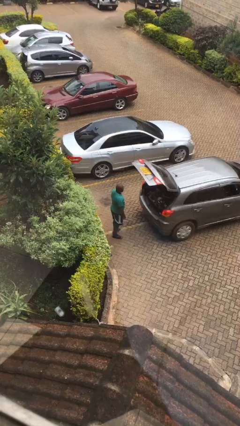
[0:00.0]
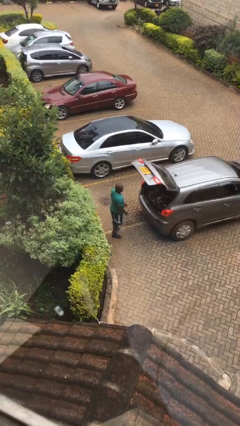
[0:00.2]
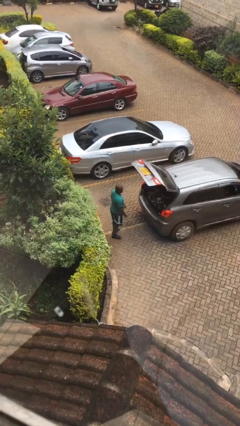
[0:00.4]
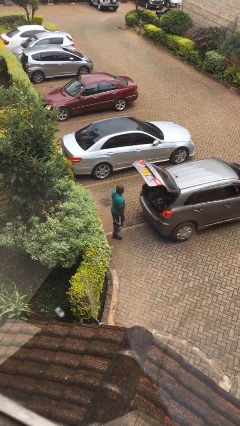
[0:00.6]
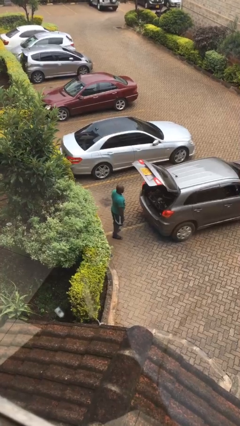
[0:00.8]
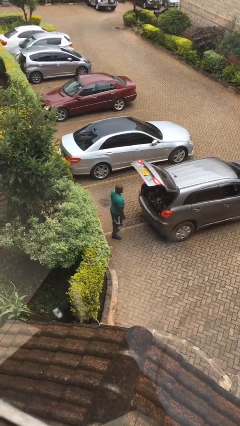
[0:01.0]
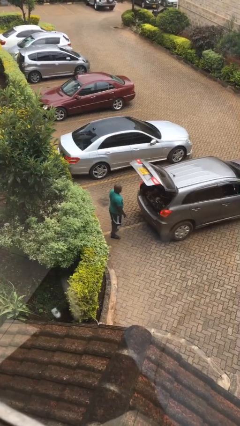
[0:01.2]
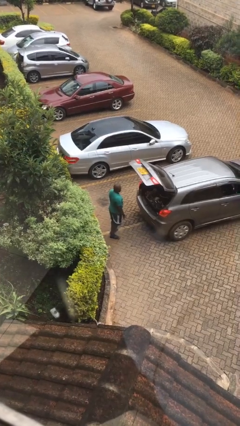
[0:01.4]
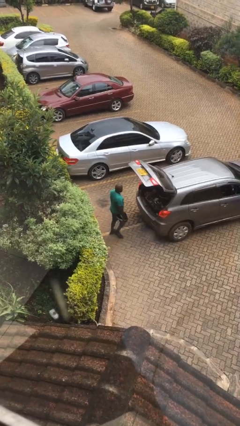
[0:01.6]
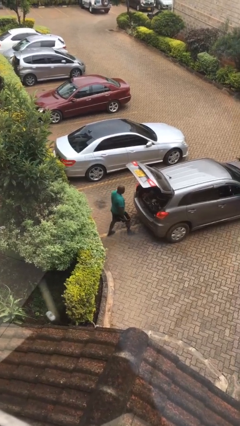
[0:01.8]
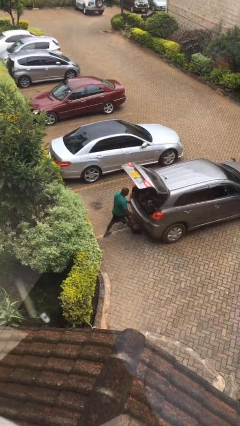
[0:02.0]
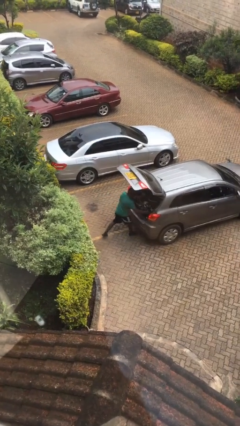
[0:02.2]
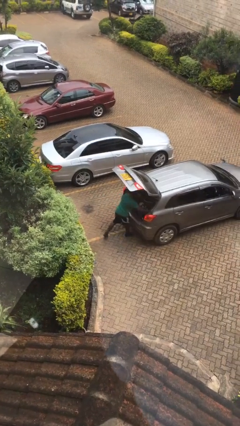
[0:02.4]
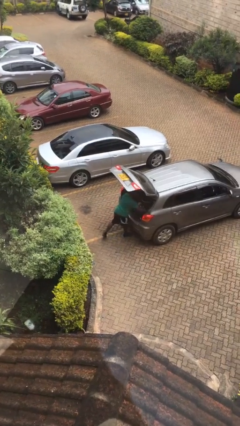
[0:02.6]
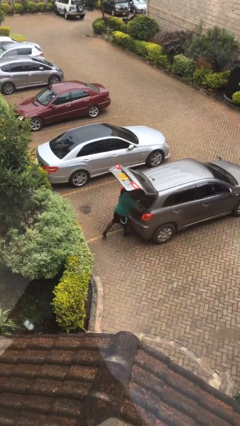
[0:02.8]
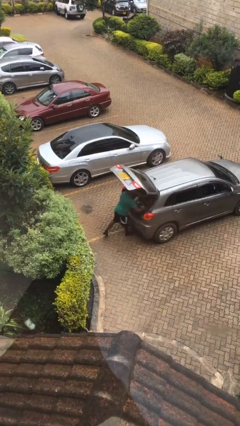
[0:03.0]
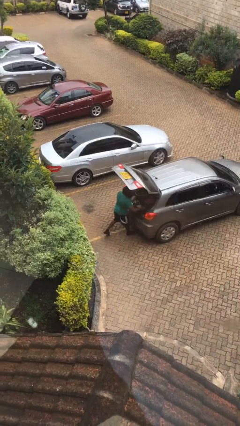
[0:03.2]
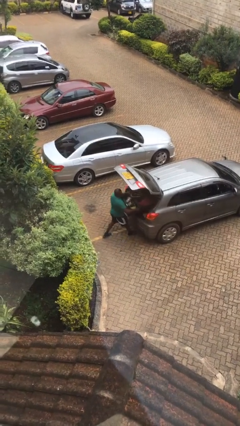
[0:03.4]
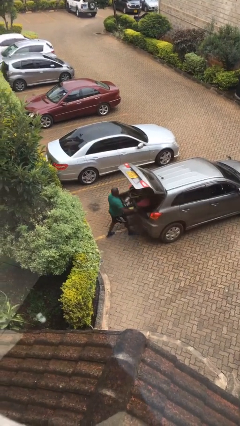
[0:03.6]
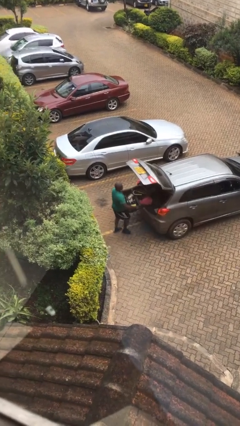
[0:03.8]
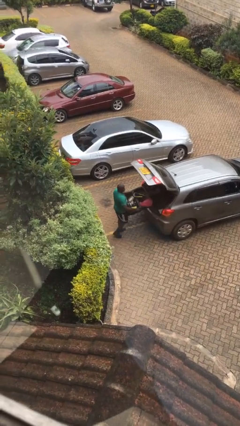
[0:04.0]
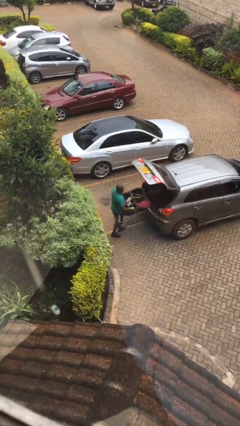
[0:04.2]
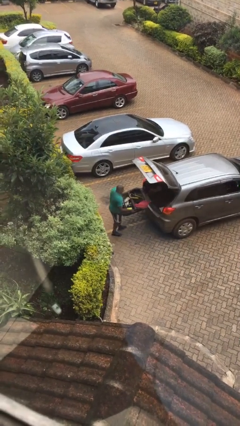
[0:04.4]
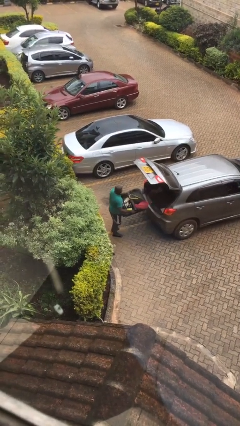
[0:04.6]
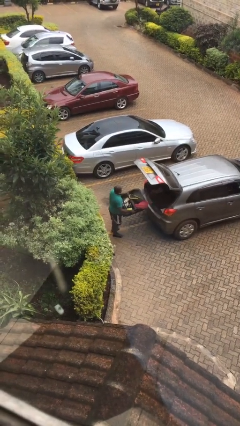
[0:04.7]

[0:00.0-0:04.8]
person unloads car

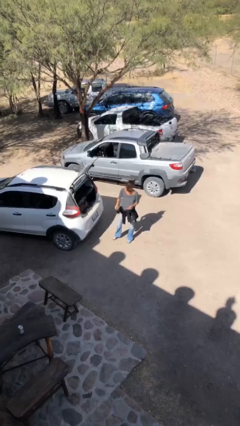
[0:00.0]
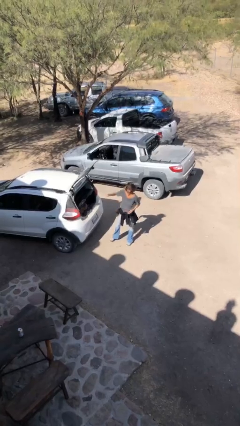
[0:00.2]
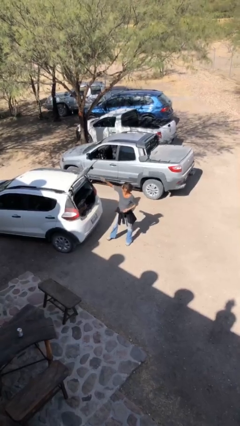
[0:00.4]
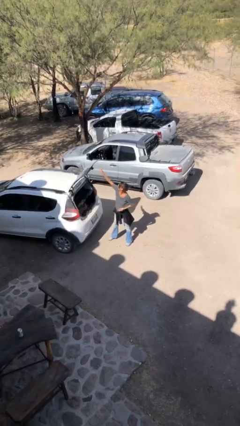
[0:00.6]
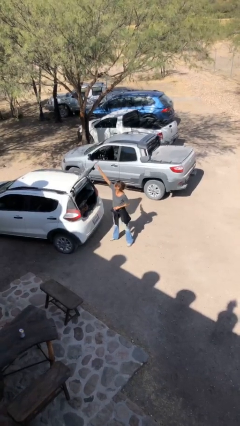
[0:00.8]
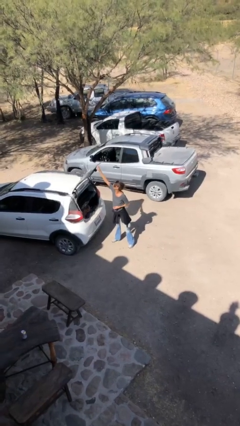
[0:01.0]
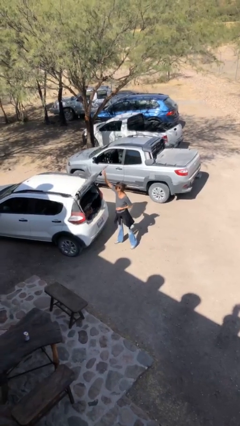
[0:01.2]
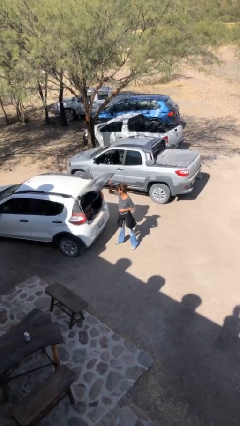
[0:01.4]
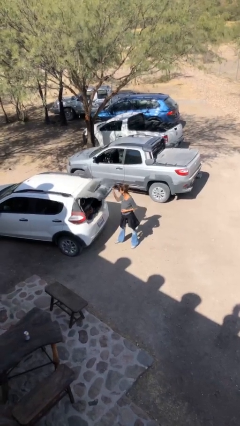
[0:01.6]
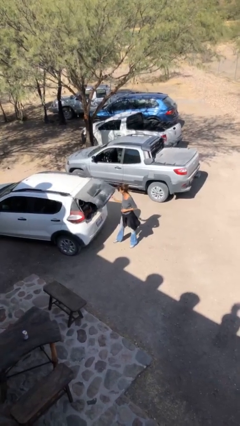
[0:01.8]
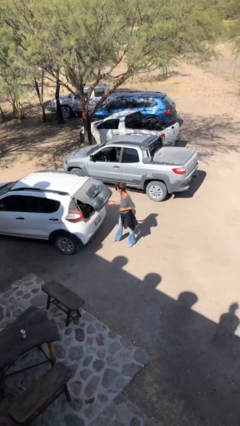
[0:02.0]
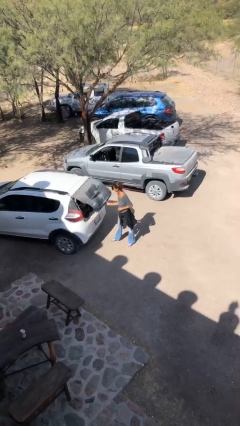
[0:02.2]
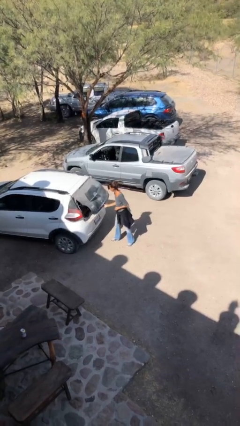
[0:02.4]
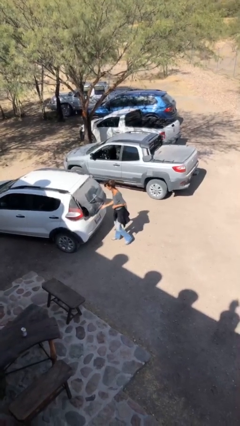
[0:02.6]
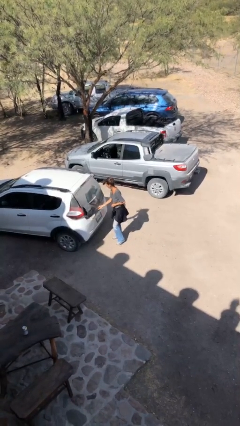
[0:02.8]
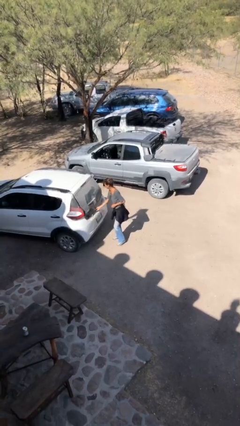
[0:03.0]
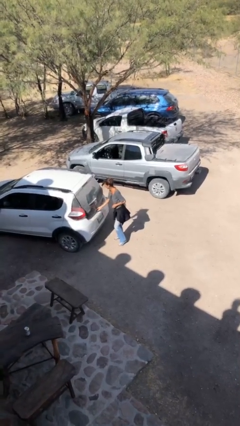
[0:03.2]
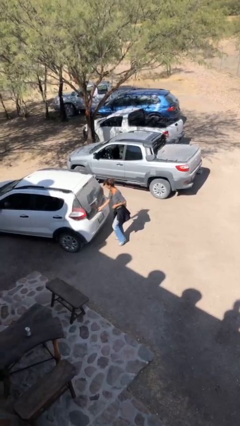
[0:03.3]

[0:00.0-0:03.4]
person closes car trunk

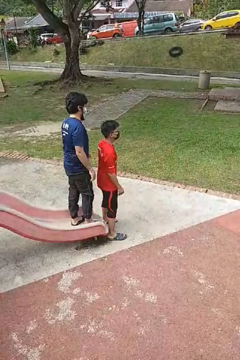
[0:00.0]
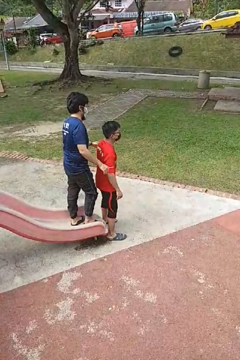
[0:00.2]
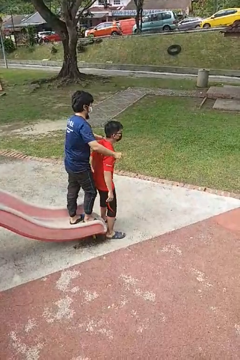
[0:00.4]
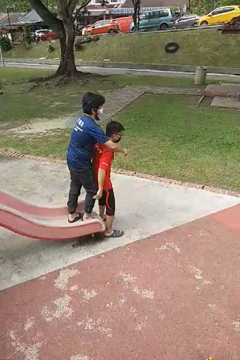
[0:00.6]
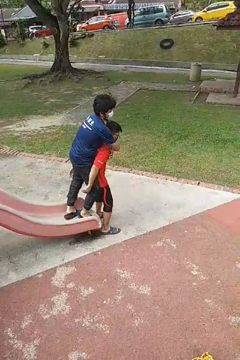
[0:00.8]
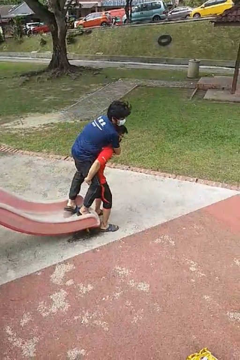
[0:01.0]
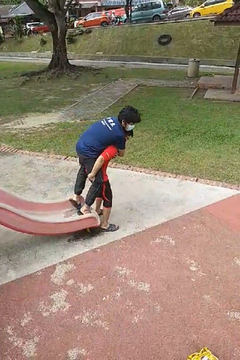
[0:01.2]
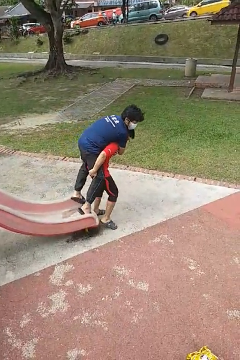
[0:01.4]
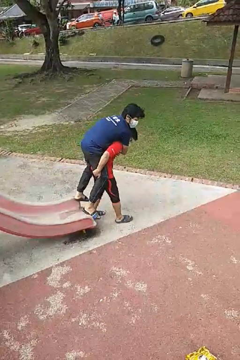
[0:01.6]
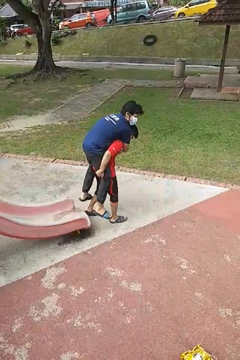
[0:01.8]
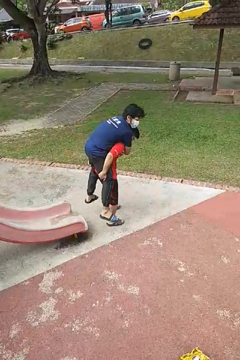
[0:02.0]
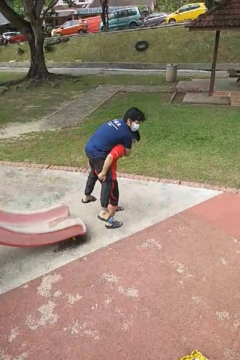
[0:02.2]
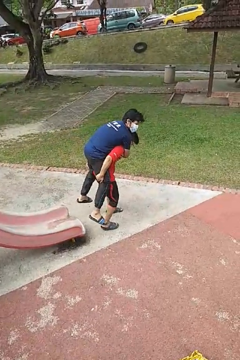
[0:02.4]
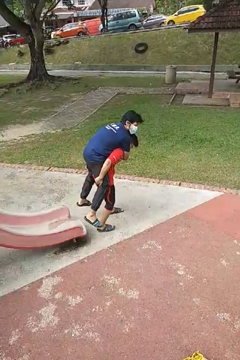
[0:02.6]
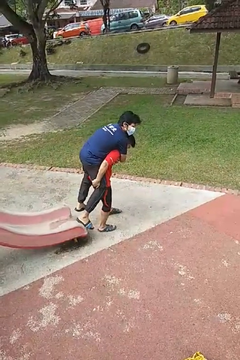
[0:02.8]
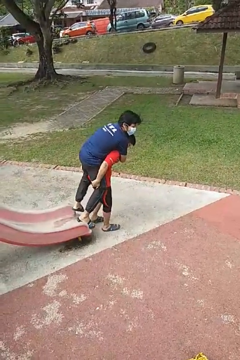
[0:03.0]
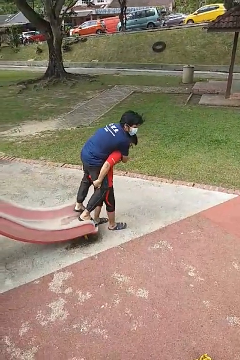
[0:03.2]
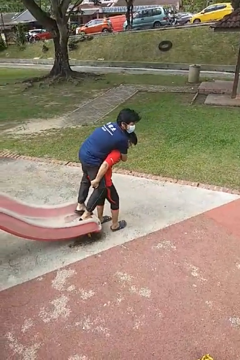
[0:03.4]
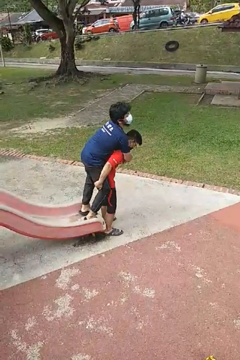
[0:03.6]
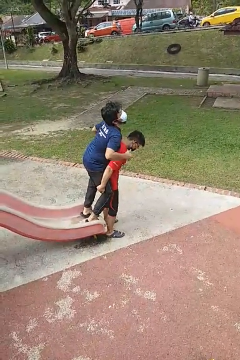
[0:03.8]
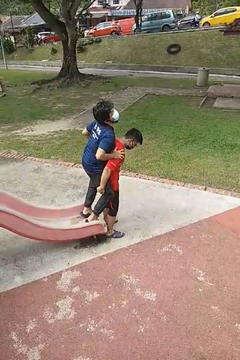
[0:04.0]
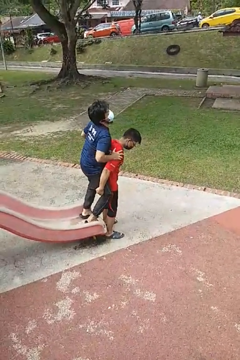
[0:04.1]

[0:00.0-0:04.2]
person carries person on back

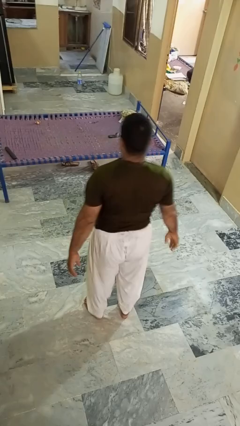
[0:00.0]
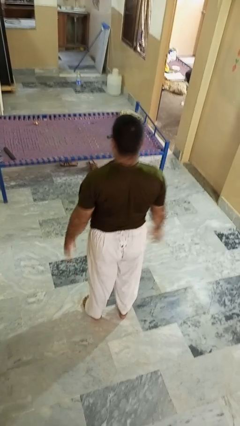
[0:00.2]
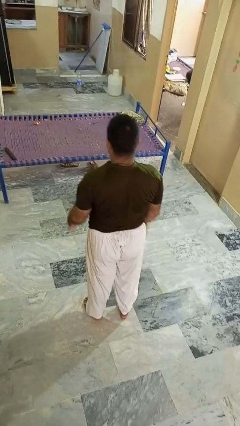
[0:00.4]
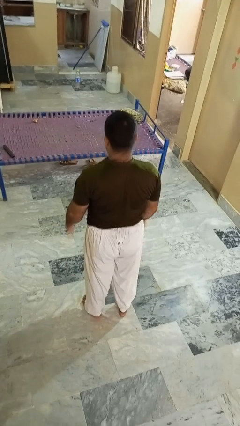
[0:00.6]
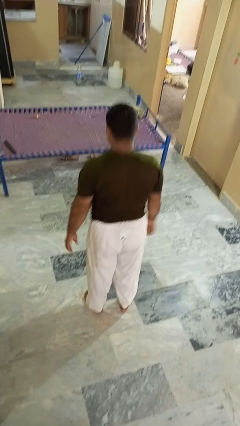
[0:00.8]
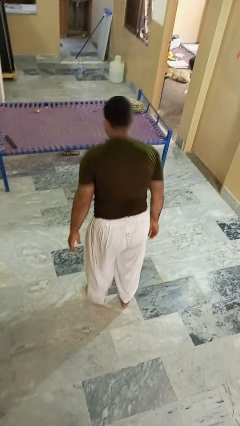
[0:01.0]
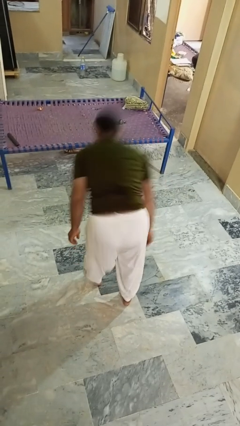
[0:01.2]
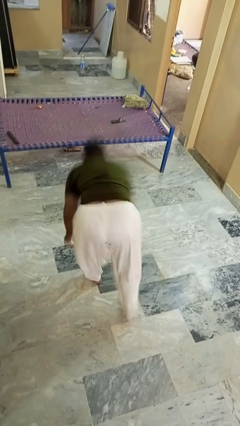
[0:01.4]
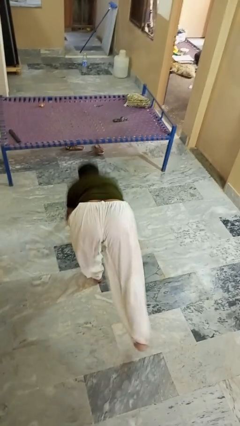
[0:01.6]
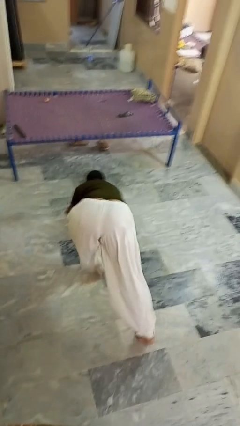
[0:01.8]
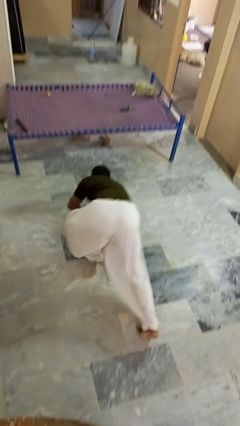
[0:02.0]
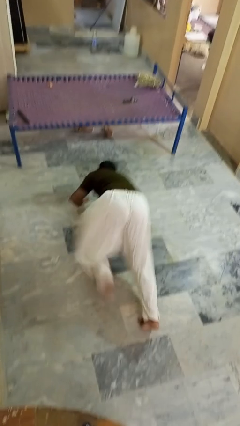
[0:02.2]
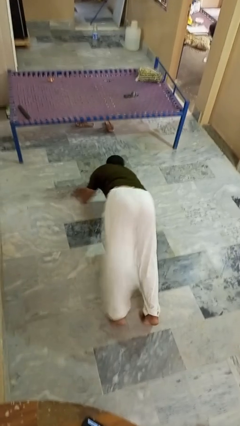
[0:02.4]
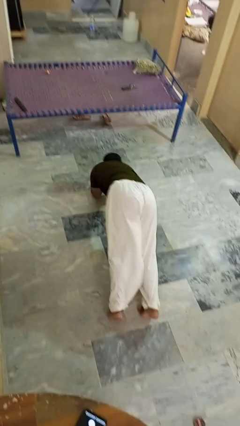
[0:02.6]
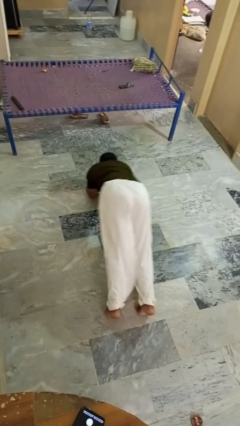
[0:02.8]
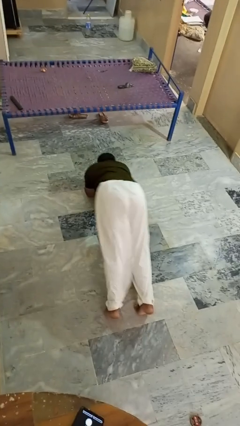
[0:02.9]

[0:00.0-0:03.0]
person exercises with plank

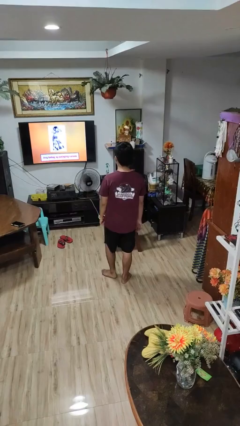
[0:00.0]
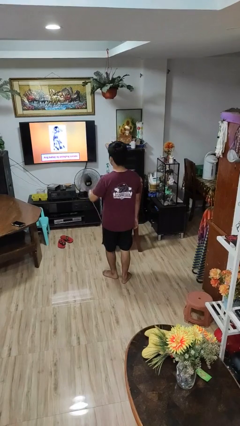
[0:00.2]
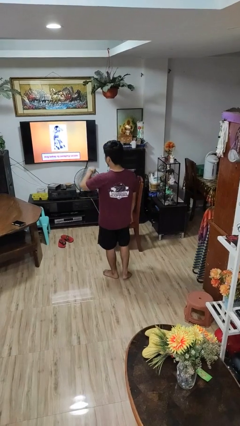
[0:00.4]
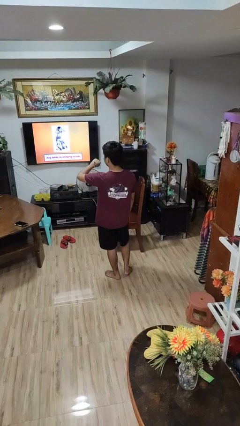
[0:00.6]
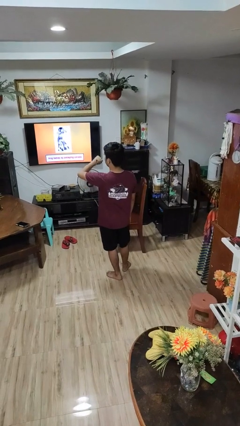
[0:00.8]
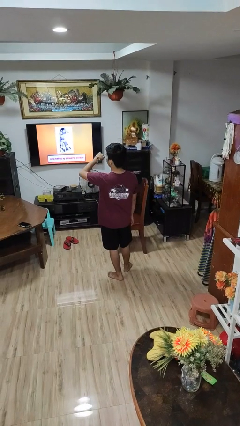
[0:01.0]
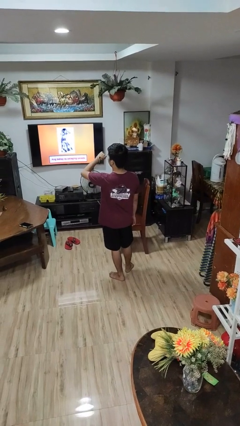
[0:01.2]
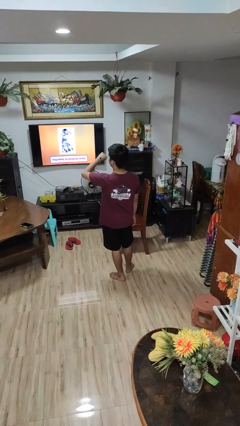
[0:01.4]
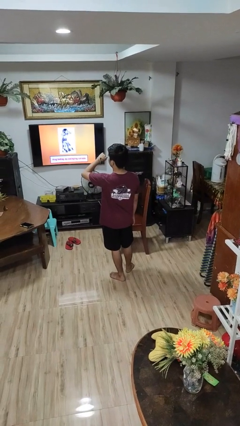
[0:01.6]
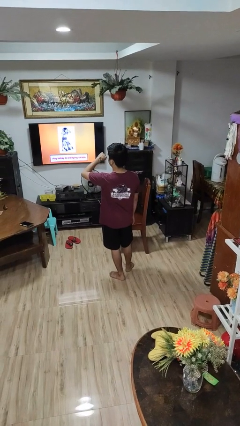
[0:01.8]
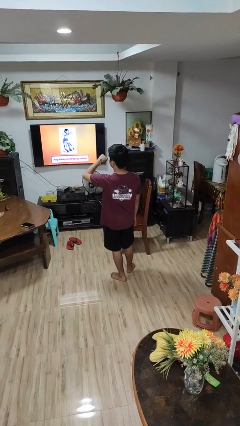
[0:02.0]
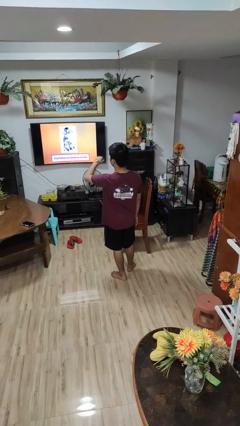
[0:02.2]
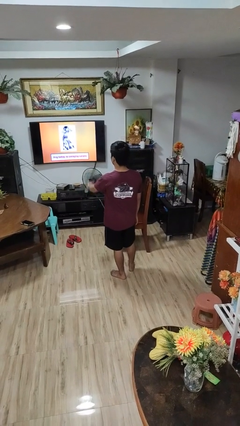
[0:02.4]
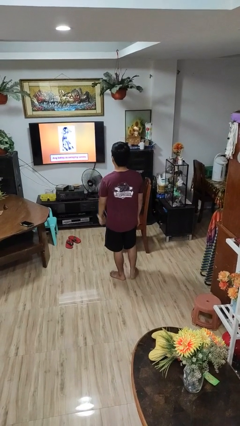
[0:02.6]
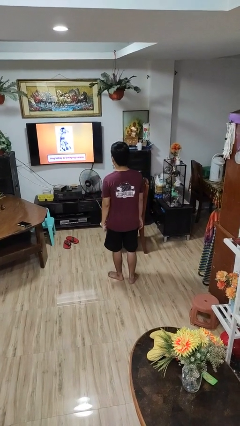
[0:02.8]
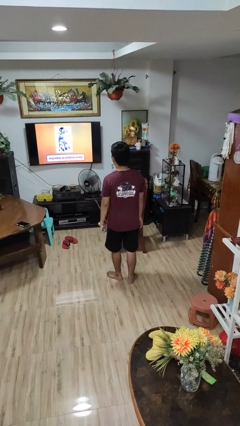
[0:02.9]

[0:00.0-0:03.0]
person looks at wristwatch
